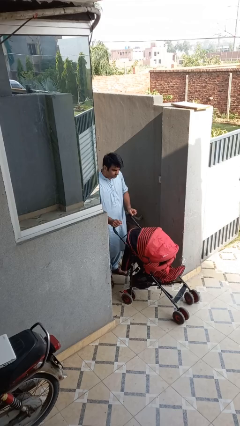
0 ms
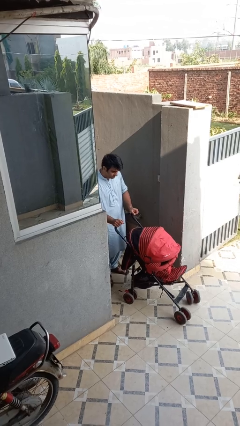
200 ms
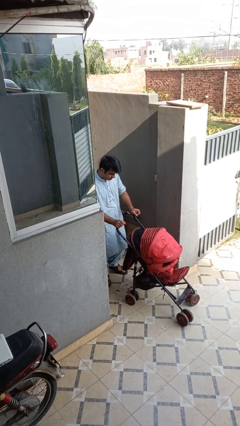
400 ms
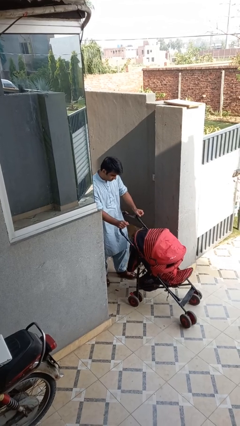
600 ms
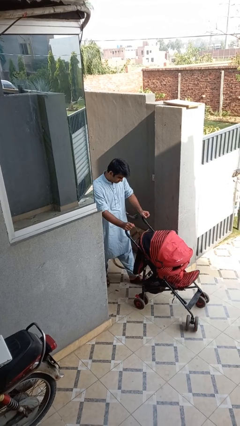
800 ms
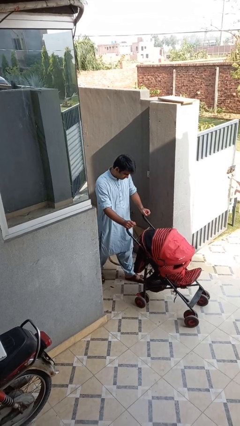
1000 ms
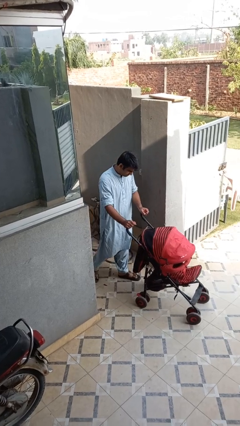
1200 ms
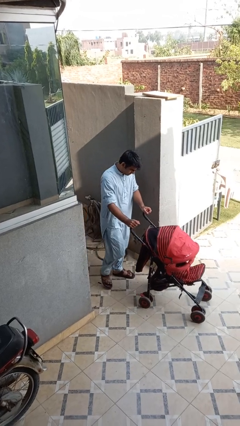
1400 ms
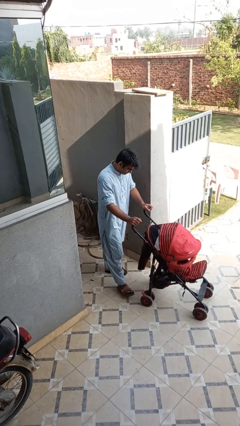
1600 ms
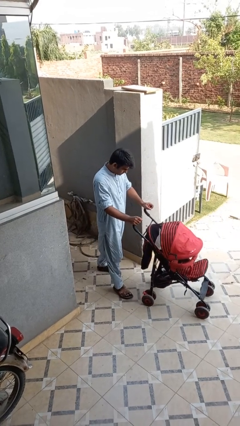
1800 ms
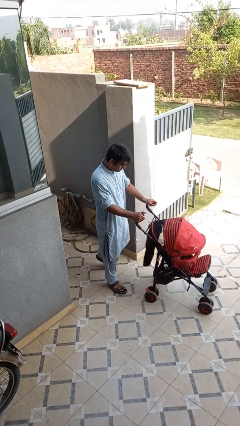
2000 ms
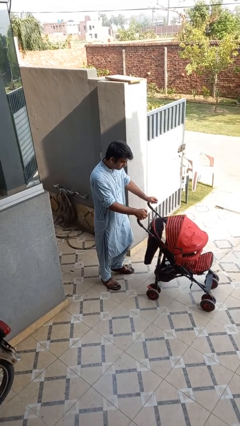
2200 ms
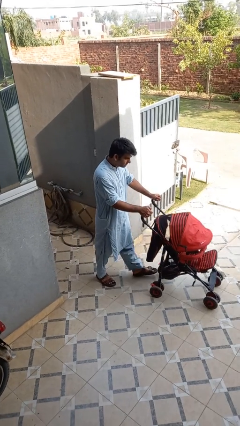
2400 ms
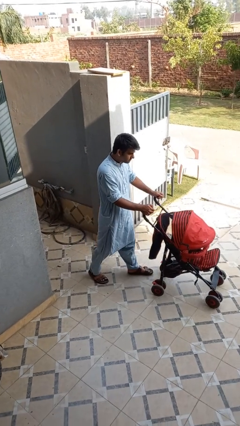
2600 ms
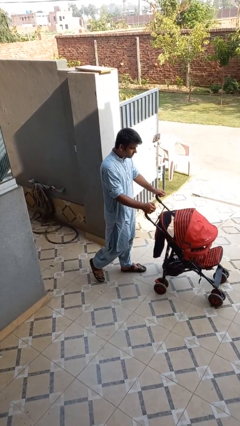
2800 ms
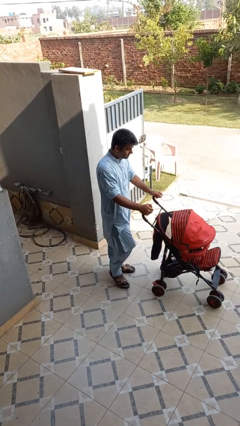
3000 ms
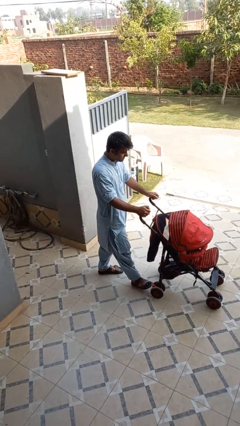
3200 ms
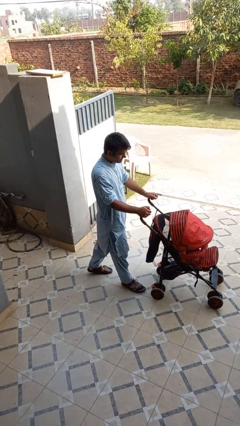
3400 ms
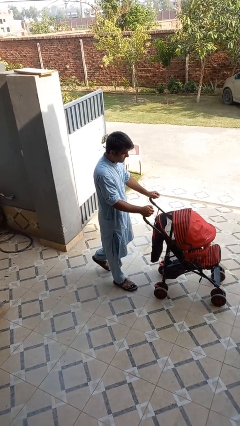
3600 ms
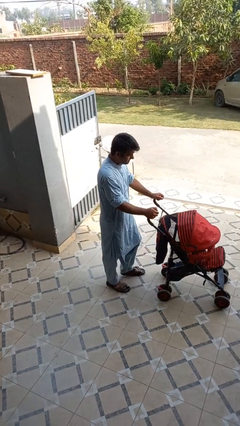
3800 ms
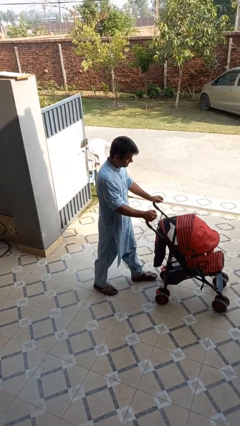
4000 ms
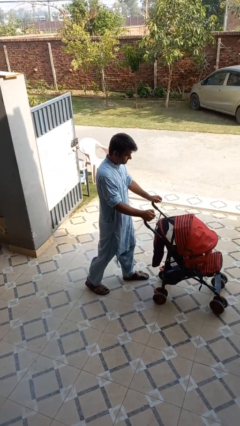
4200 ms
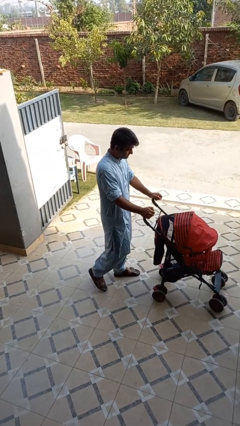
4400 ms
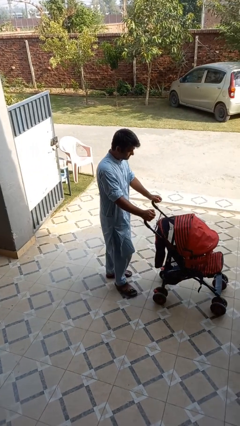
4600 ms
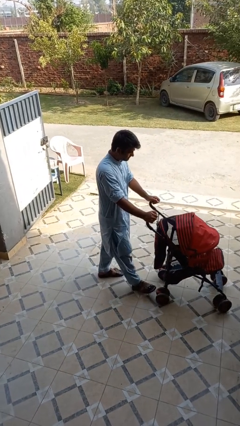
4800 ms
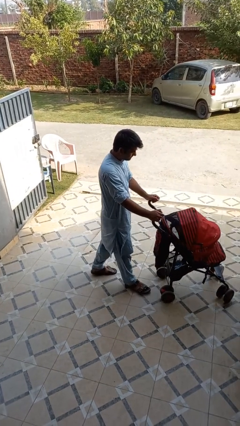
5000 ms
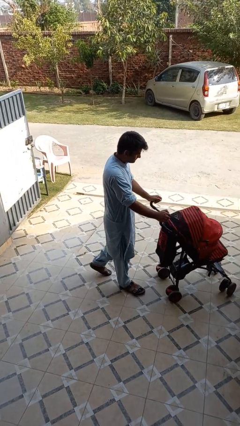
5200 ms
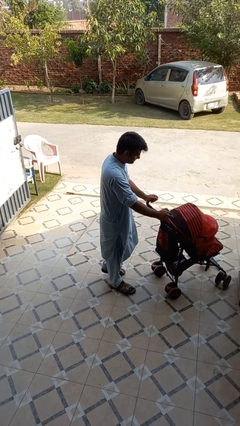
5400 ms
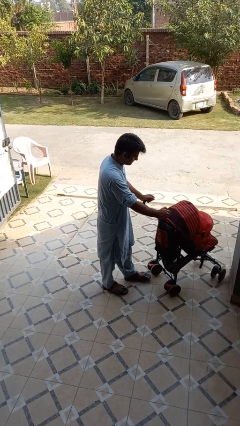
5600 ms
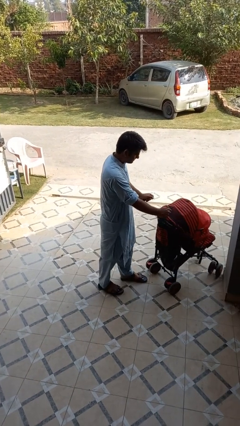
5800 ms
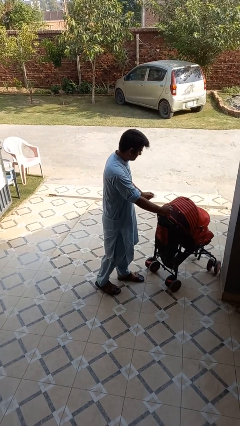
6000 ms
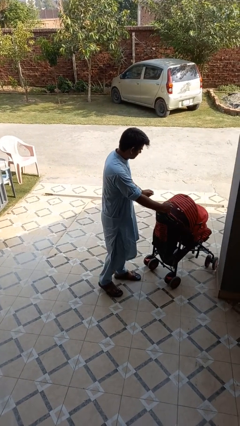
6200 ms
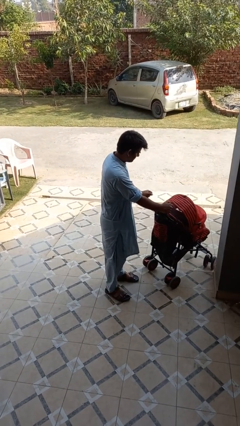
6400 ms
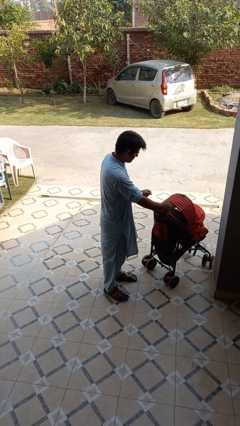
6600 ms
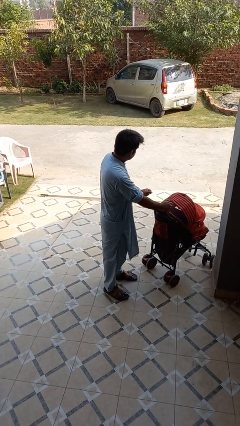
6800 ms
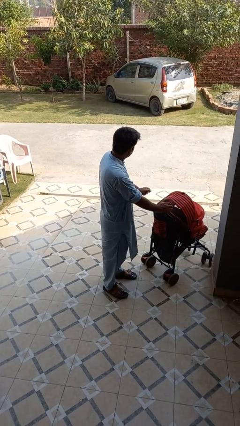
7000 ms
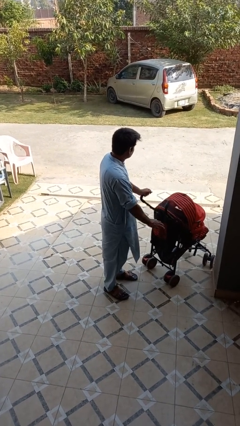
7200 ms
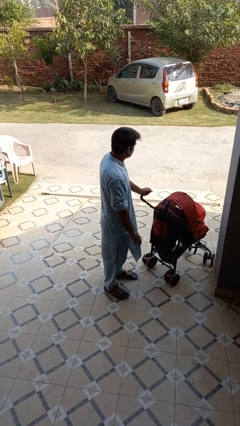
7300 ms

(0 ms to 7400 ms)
person pushes wheeled cart

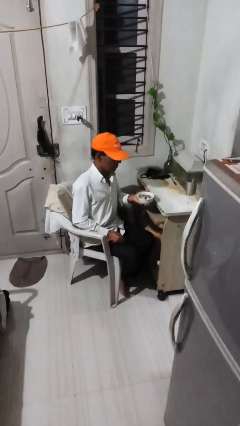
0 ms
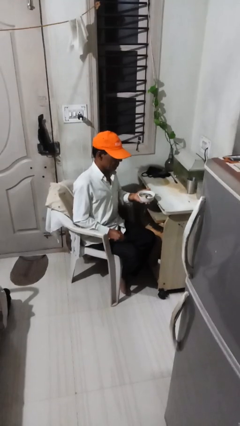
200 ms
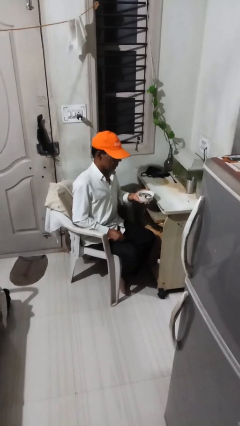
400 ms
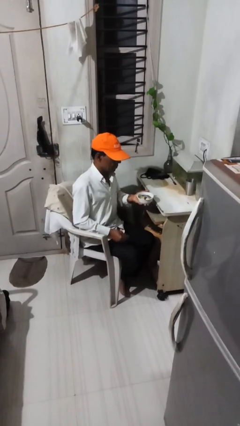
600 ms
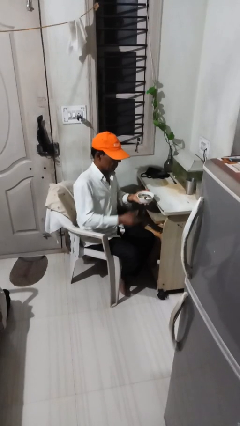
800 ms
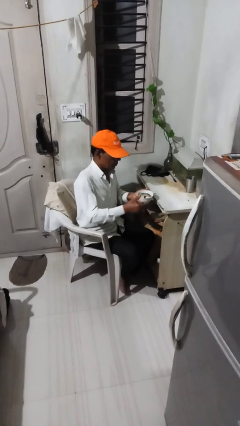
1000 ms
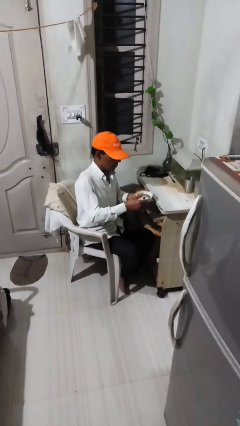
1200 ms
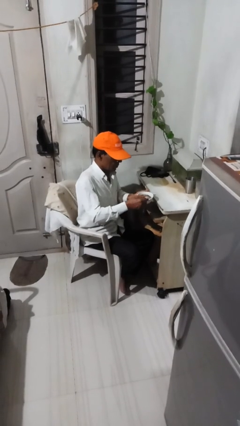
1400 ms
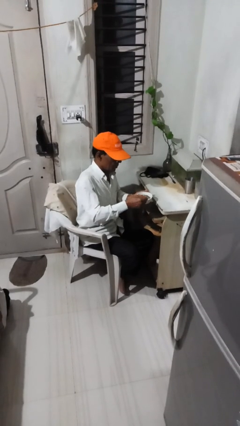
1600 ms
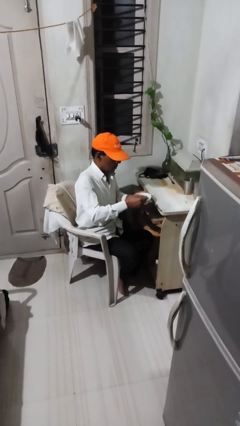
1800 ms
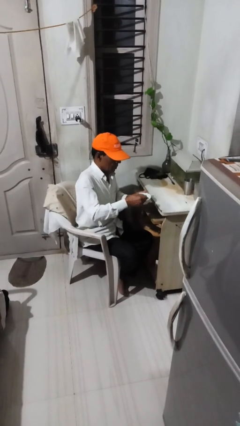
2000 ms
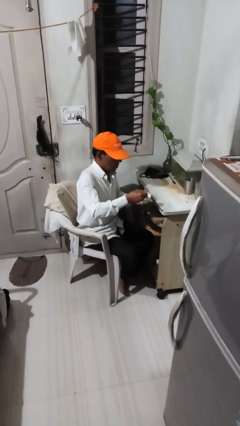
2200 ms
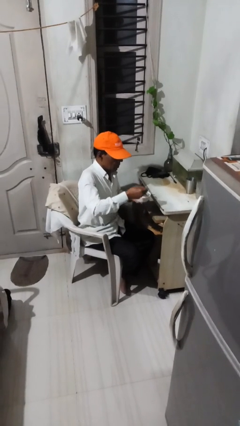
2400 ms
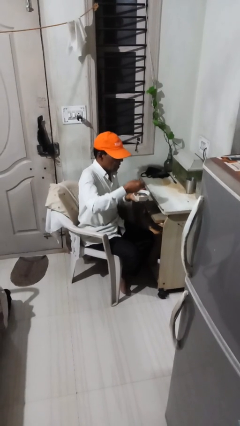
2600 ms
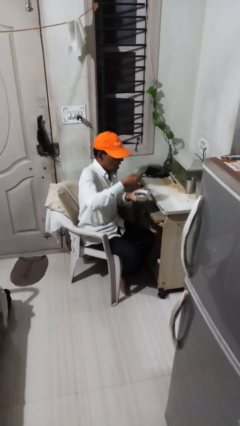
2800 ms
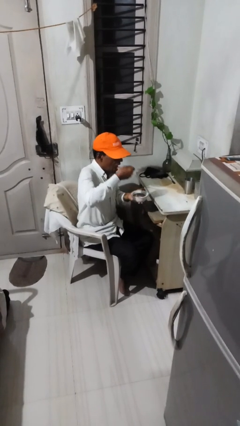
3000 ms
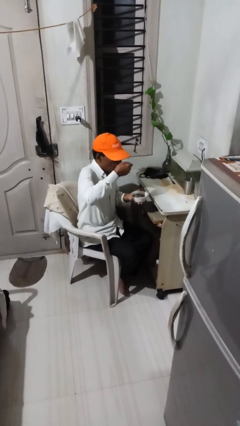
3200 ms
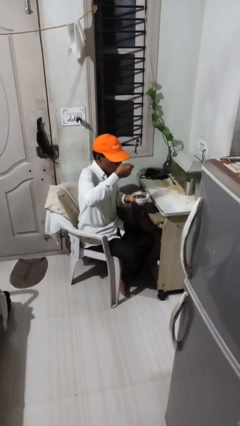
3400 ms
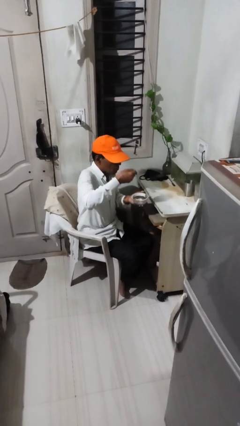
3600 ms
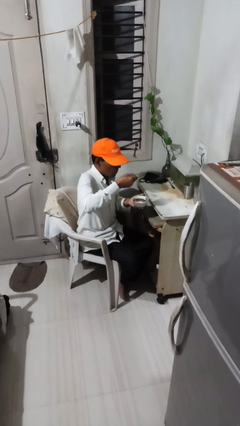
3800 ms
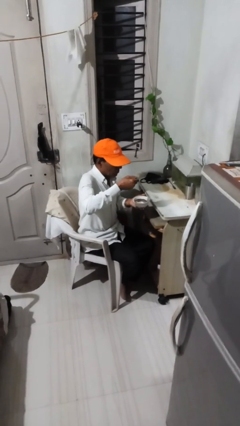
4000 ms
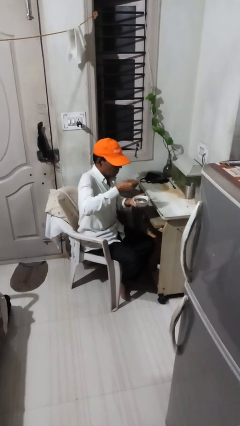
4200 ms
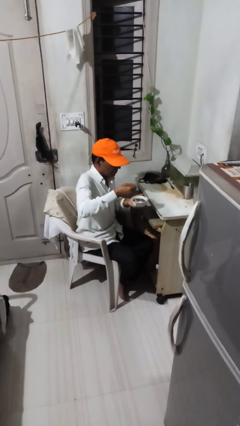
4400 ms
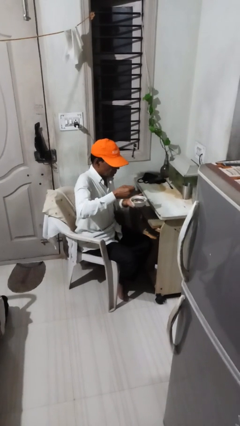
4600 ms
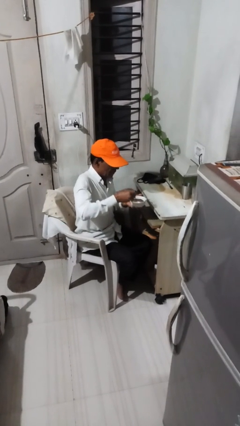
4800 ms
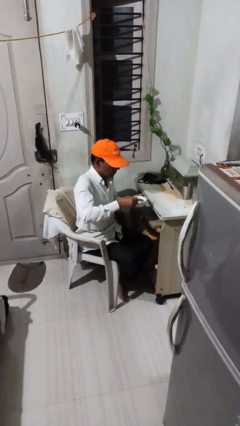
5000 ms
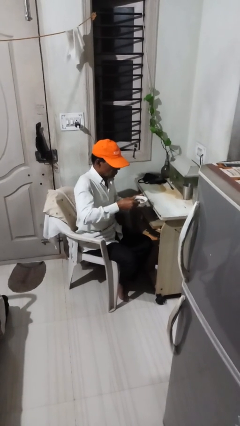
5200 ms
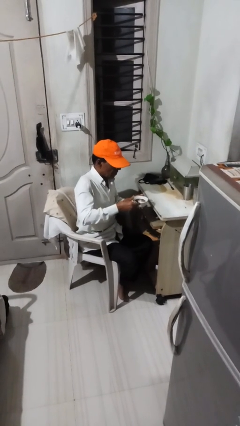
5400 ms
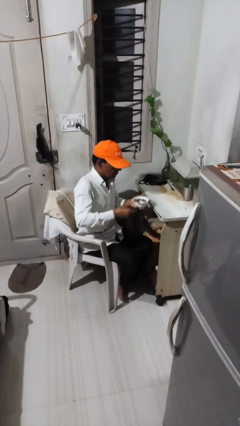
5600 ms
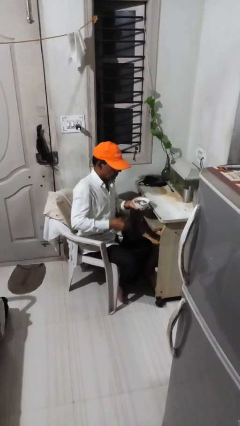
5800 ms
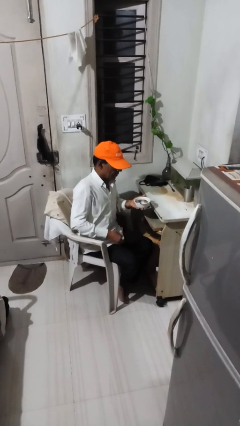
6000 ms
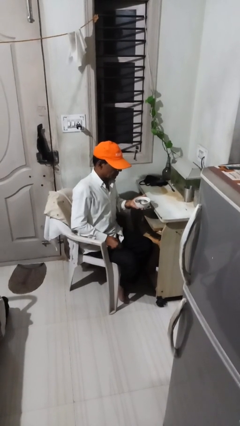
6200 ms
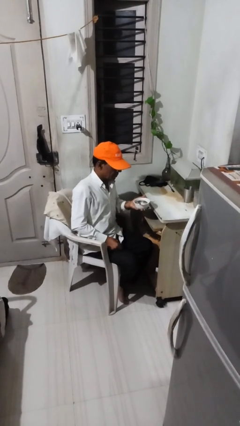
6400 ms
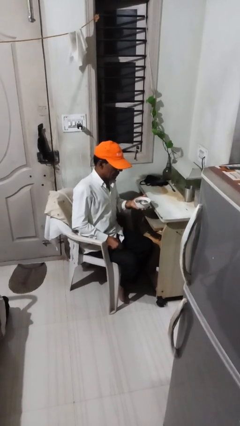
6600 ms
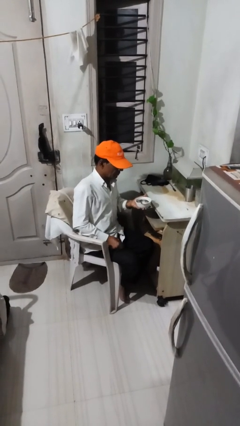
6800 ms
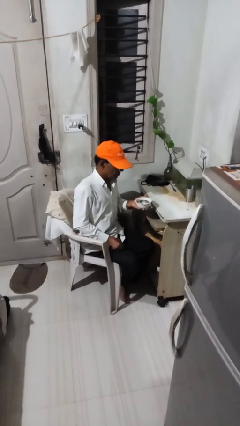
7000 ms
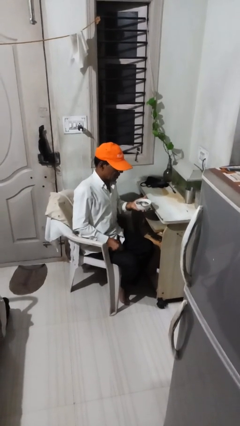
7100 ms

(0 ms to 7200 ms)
person eats with utensil

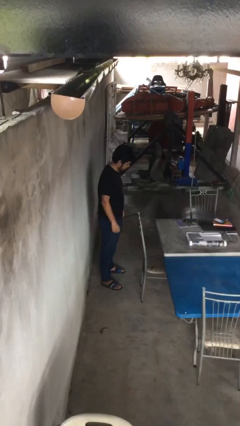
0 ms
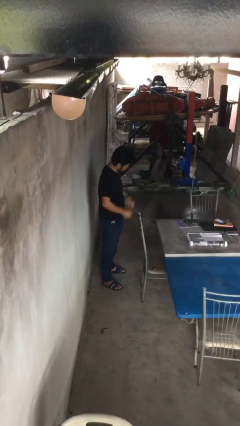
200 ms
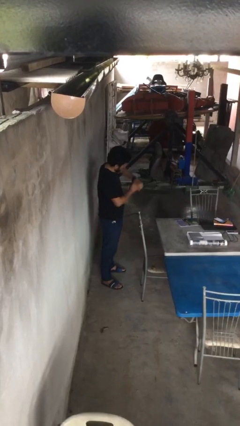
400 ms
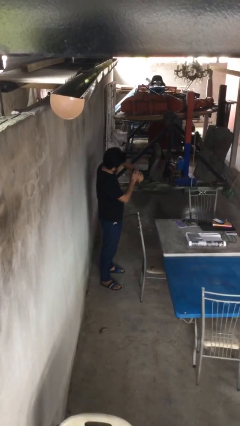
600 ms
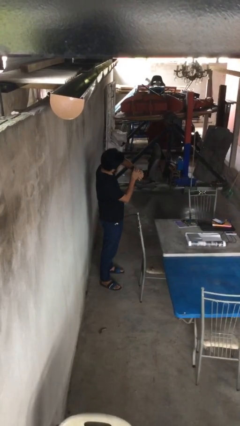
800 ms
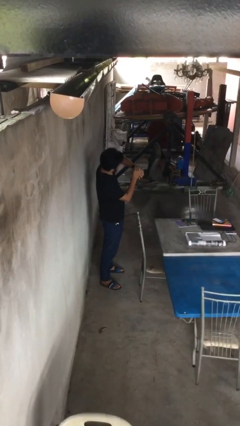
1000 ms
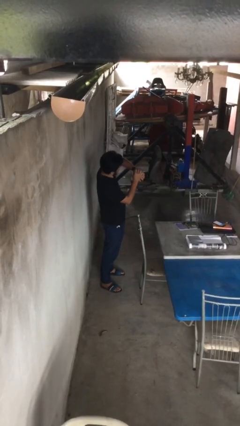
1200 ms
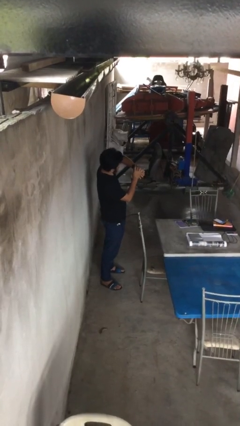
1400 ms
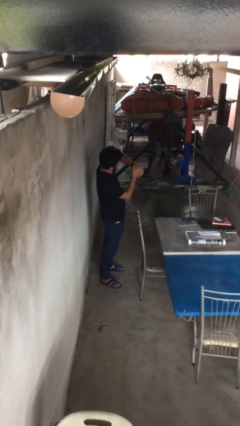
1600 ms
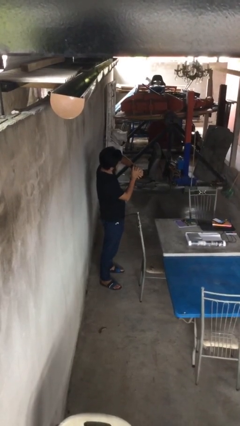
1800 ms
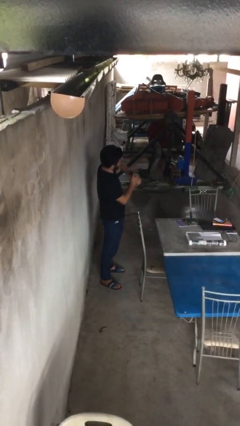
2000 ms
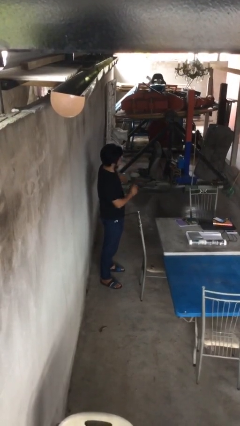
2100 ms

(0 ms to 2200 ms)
person looks at wristwatch

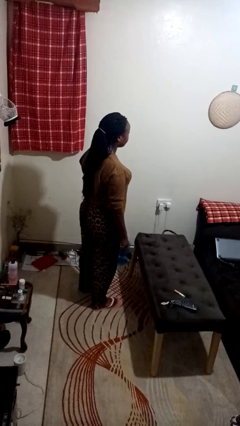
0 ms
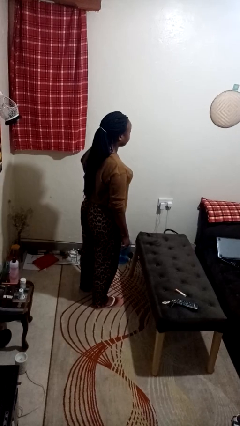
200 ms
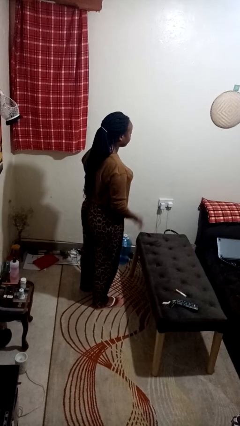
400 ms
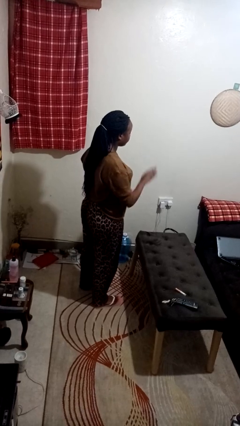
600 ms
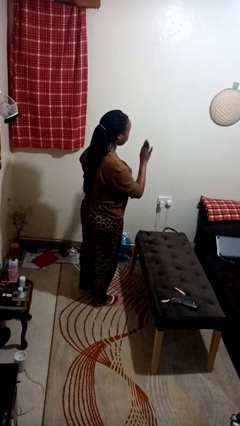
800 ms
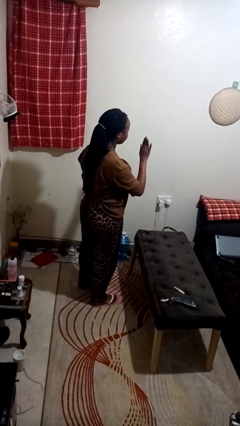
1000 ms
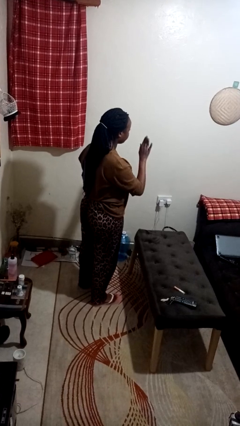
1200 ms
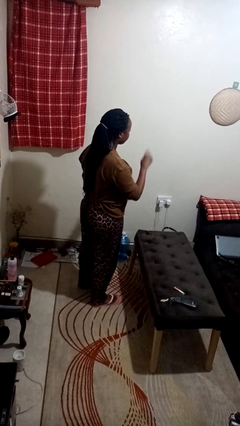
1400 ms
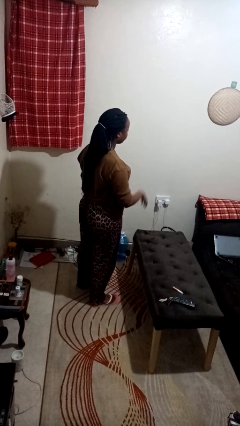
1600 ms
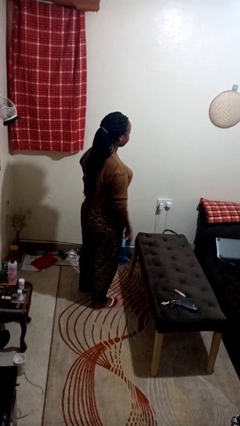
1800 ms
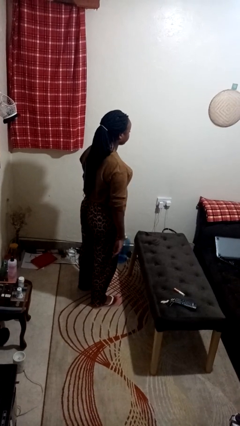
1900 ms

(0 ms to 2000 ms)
person gestures stop
